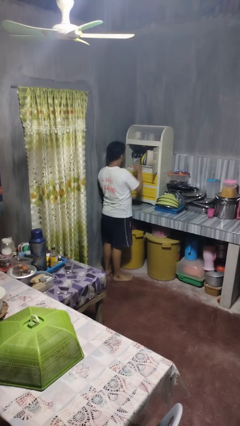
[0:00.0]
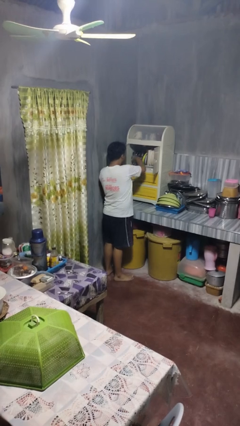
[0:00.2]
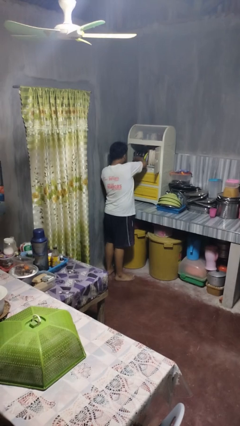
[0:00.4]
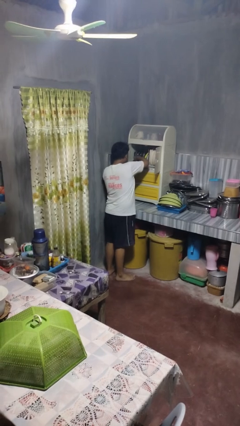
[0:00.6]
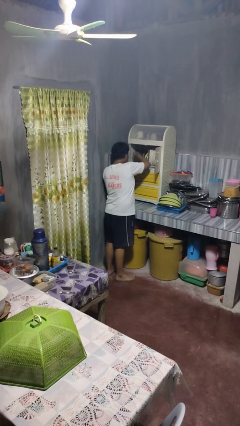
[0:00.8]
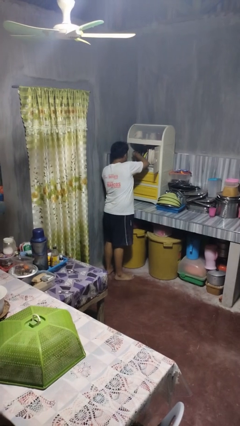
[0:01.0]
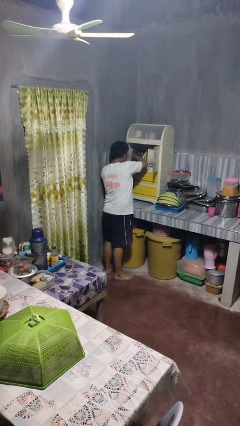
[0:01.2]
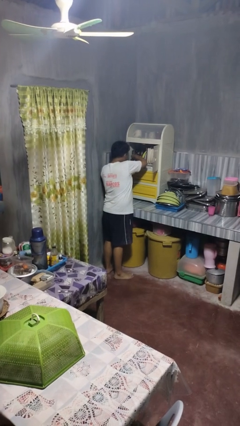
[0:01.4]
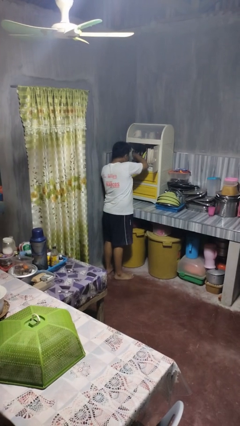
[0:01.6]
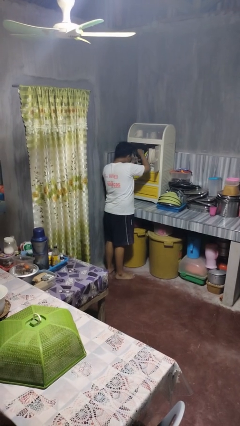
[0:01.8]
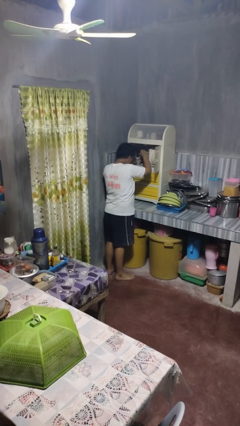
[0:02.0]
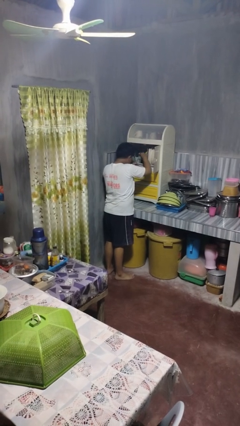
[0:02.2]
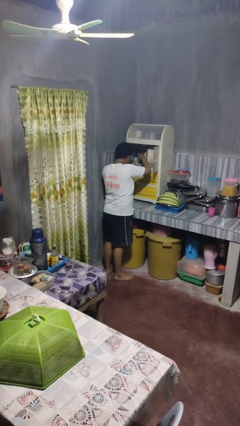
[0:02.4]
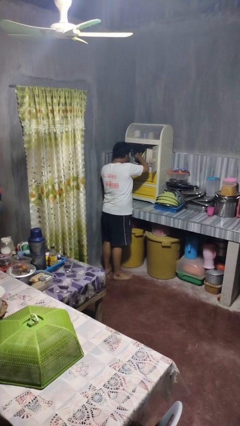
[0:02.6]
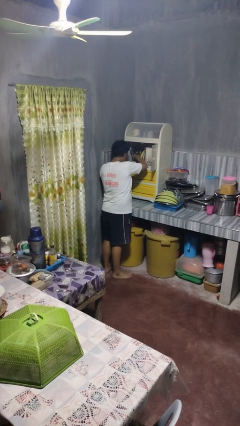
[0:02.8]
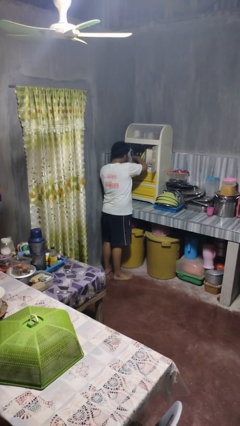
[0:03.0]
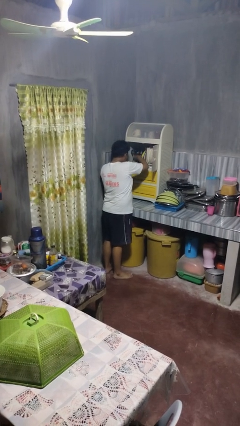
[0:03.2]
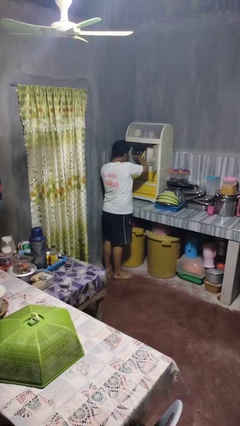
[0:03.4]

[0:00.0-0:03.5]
person searches in cabinet

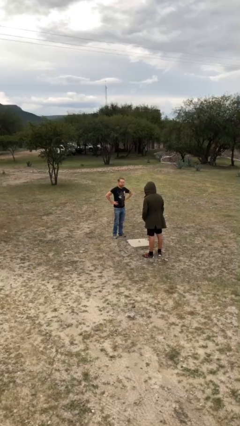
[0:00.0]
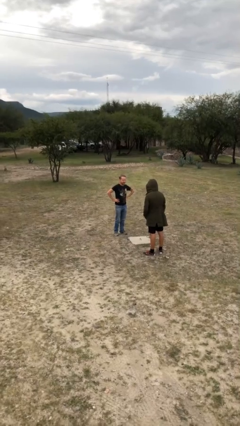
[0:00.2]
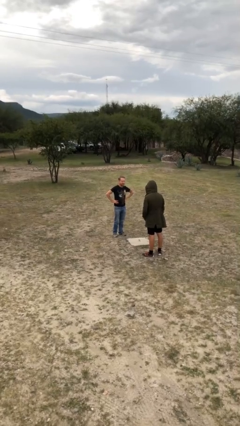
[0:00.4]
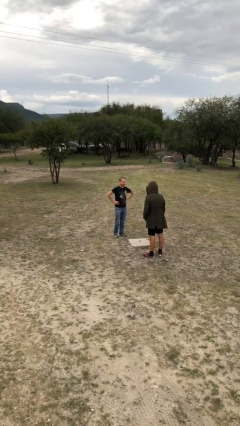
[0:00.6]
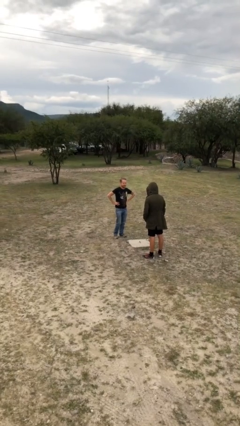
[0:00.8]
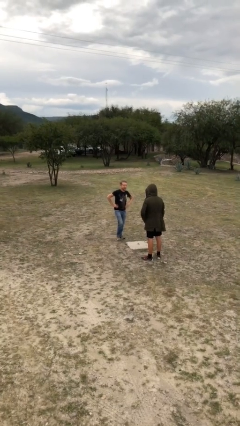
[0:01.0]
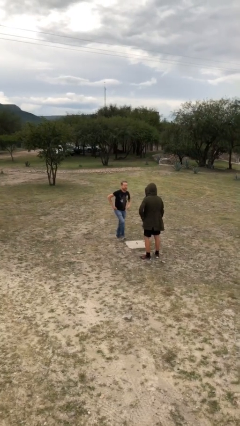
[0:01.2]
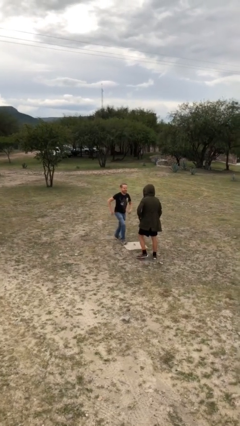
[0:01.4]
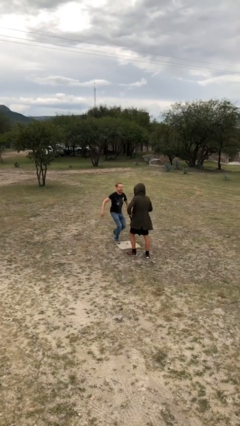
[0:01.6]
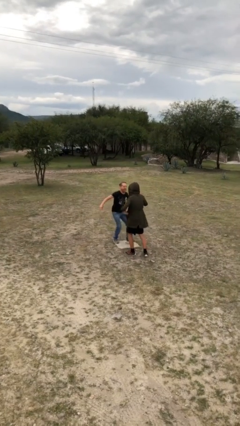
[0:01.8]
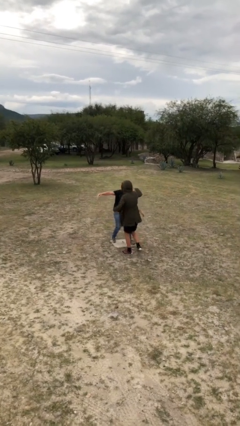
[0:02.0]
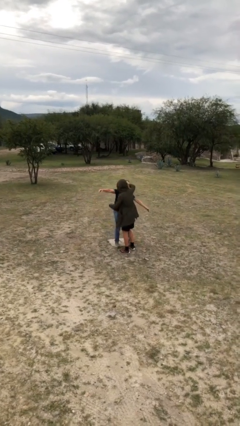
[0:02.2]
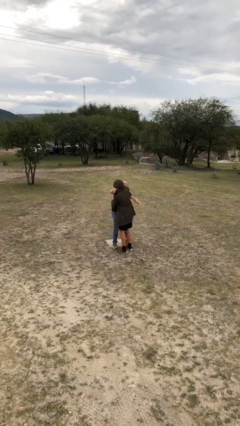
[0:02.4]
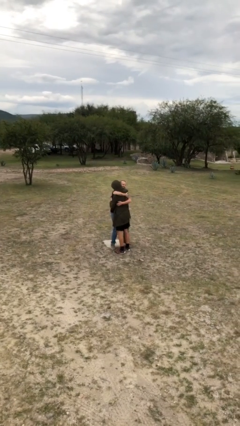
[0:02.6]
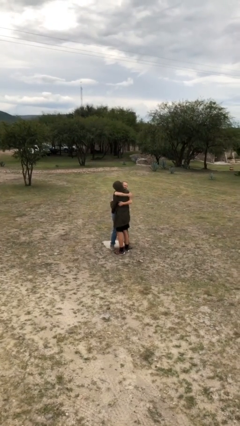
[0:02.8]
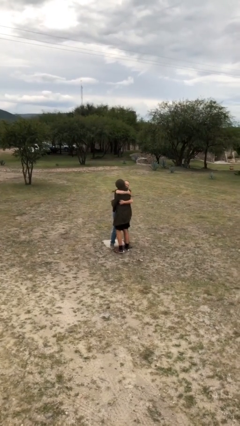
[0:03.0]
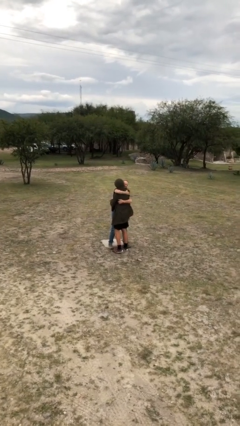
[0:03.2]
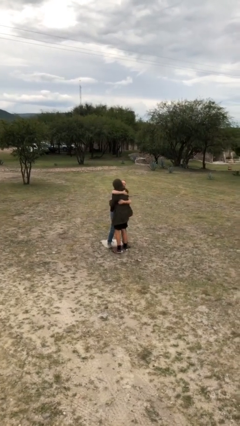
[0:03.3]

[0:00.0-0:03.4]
person embraces person

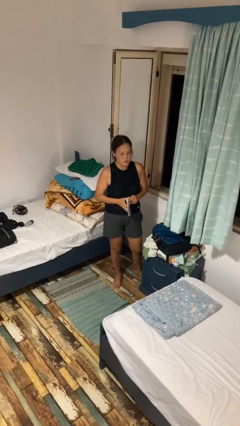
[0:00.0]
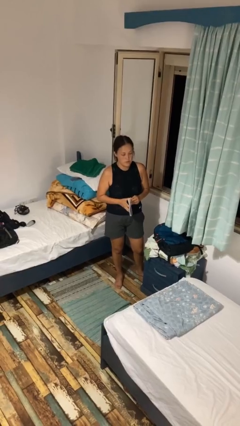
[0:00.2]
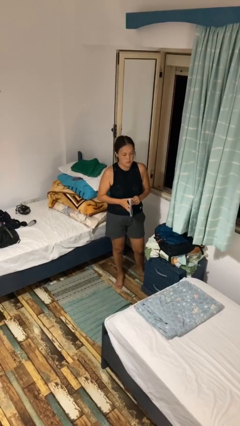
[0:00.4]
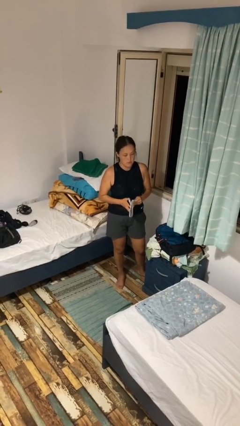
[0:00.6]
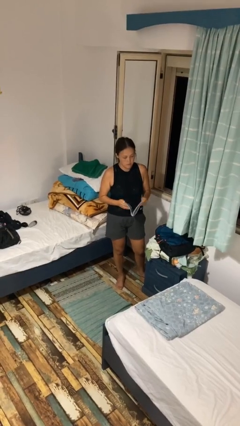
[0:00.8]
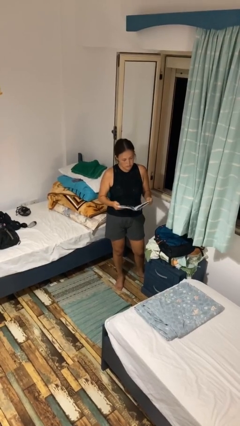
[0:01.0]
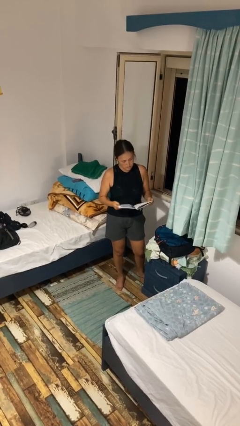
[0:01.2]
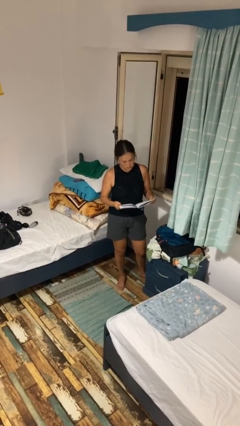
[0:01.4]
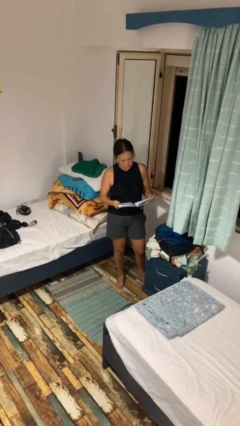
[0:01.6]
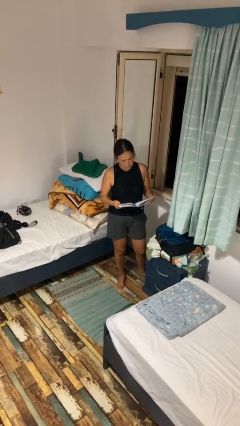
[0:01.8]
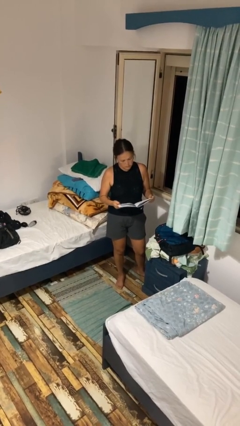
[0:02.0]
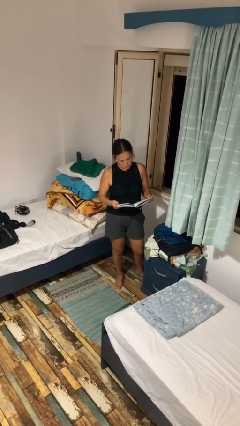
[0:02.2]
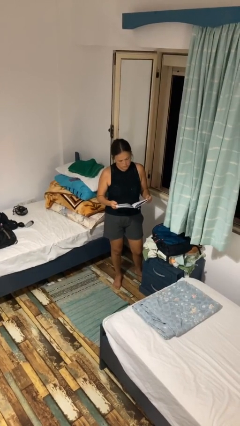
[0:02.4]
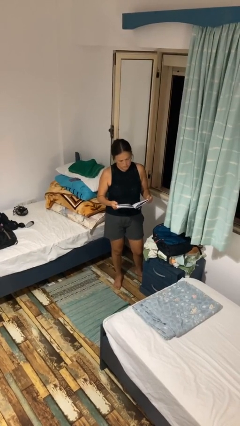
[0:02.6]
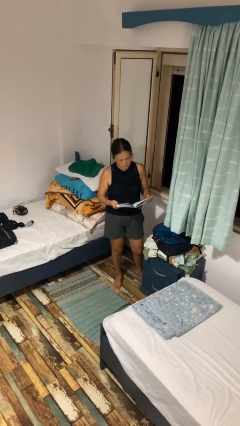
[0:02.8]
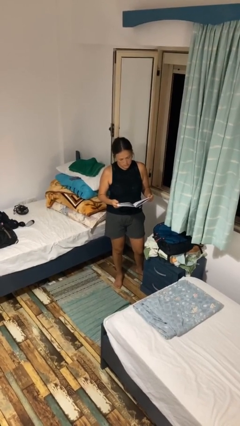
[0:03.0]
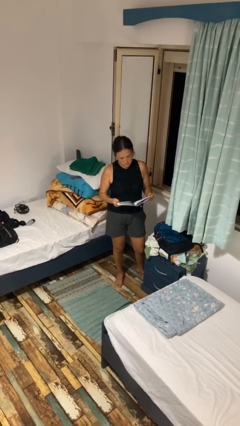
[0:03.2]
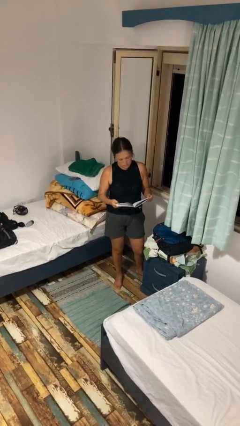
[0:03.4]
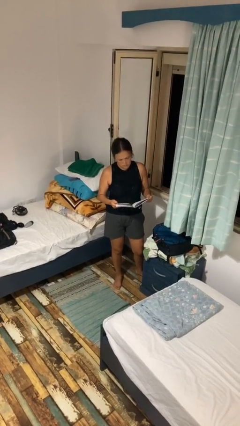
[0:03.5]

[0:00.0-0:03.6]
person reads book

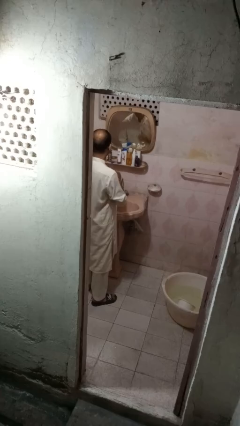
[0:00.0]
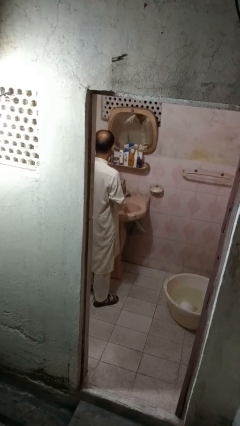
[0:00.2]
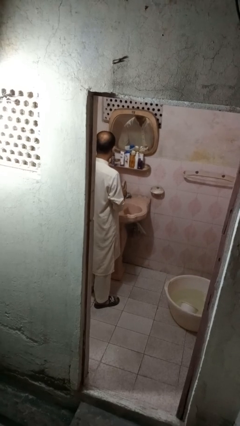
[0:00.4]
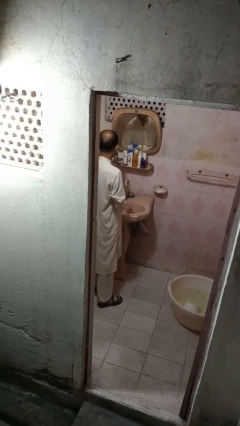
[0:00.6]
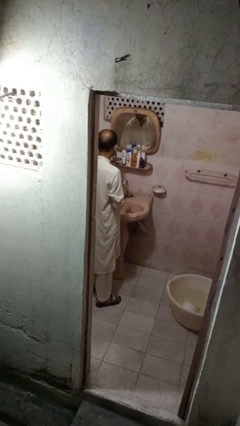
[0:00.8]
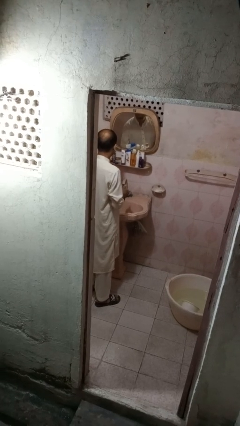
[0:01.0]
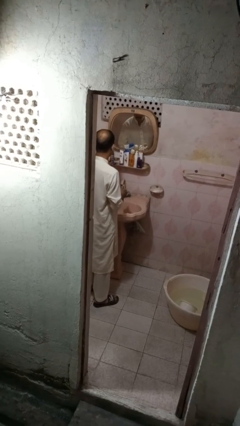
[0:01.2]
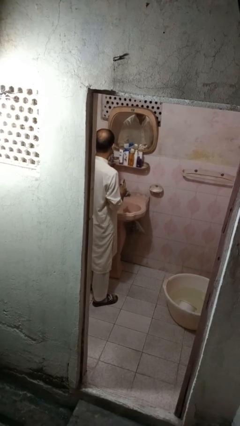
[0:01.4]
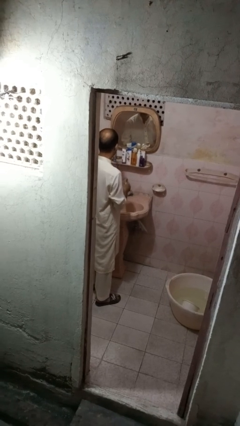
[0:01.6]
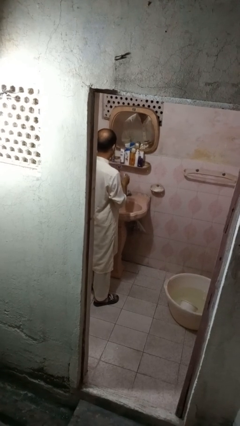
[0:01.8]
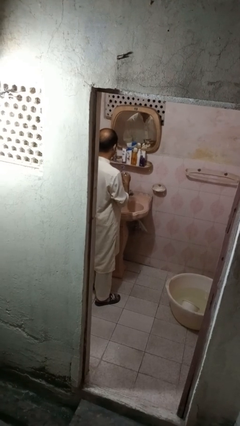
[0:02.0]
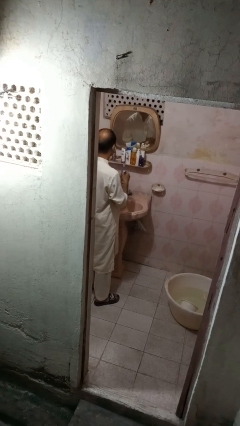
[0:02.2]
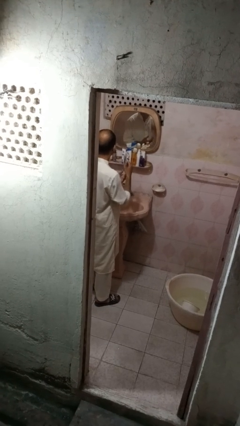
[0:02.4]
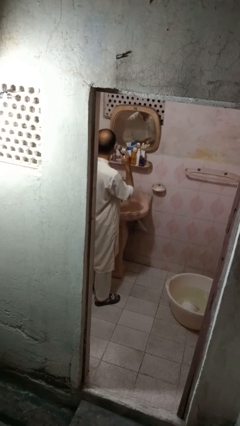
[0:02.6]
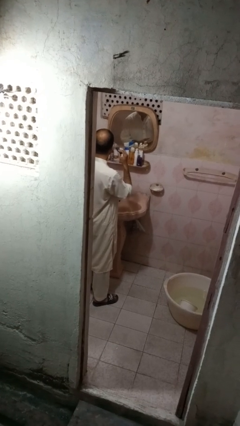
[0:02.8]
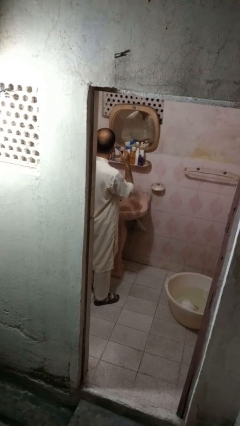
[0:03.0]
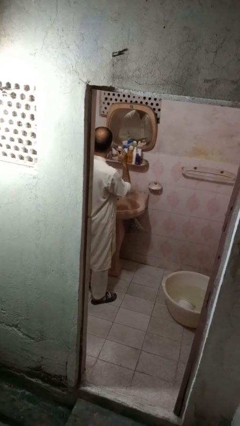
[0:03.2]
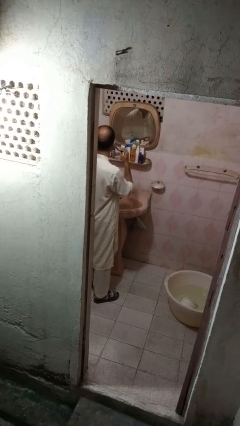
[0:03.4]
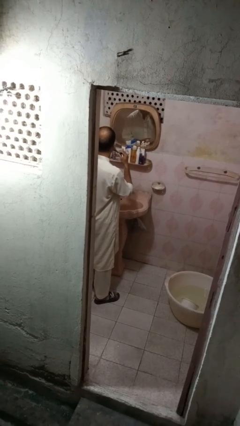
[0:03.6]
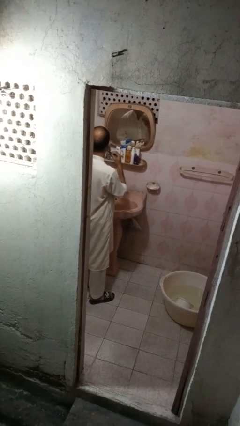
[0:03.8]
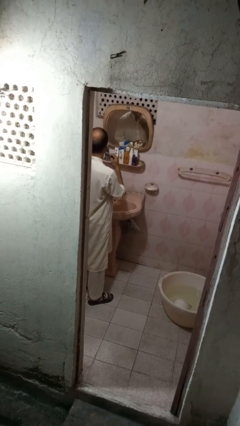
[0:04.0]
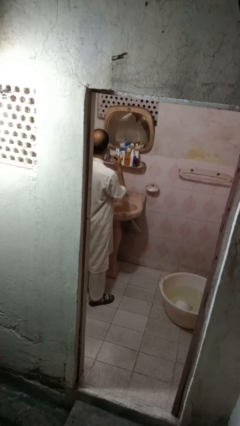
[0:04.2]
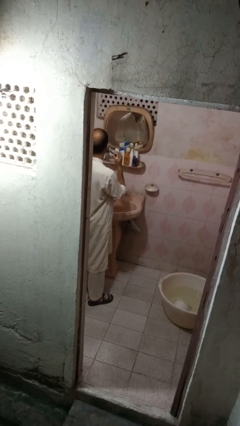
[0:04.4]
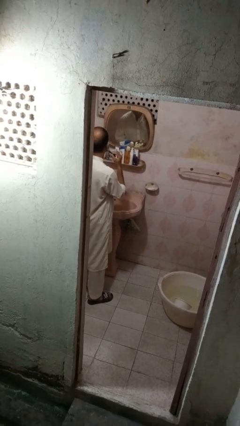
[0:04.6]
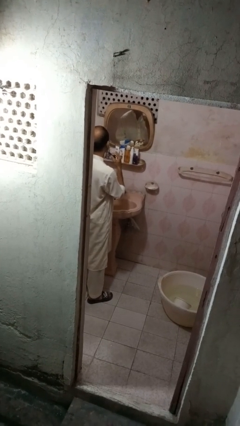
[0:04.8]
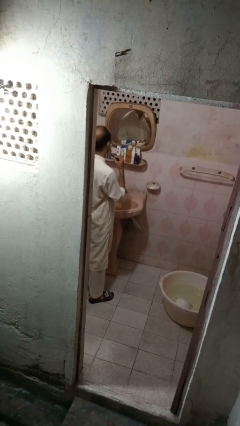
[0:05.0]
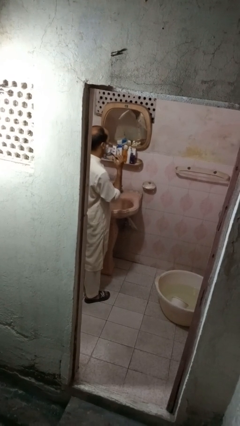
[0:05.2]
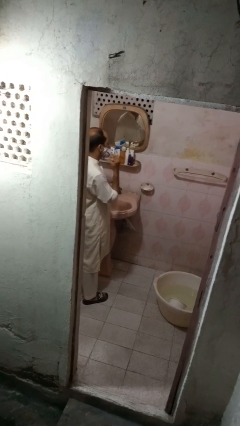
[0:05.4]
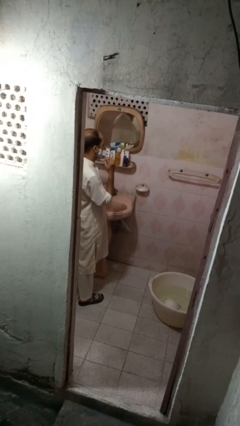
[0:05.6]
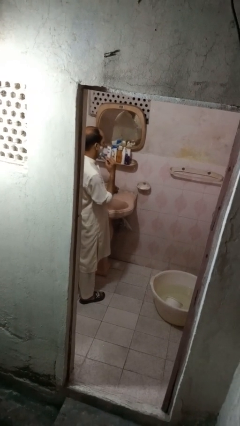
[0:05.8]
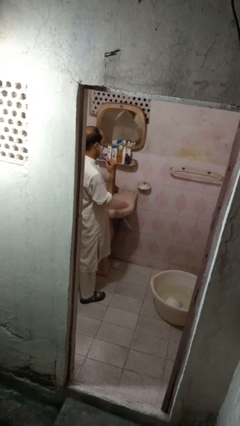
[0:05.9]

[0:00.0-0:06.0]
person shaves face

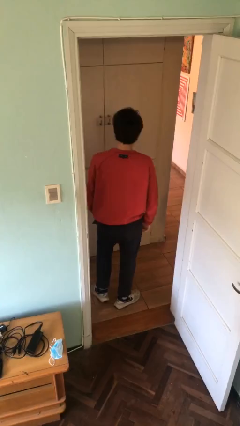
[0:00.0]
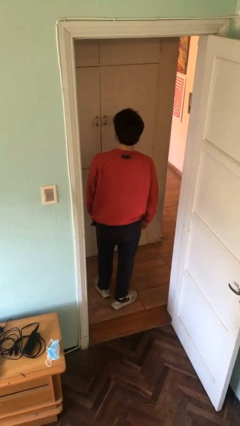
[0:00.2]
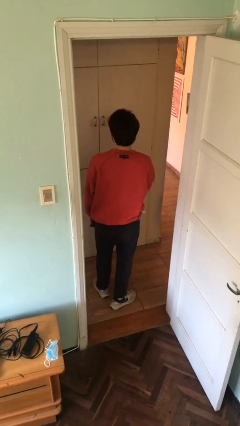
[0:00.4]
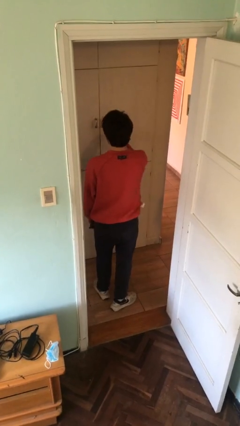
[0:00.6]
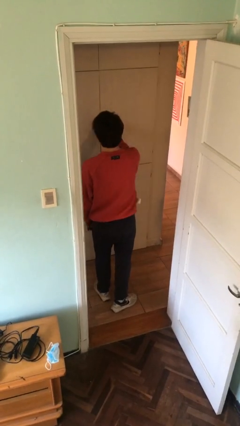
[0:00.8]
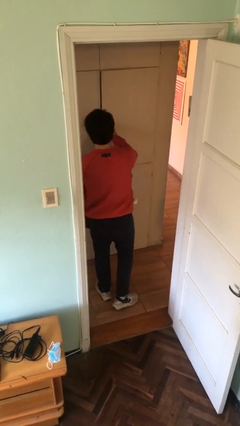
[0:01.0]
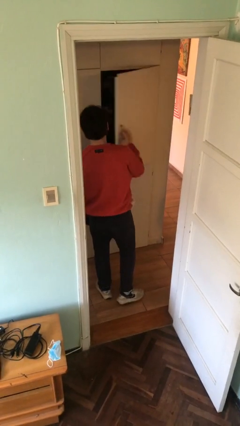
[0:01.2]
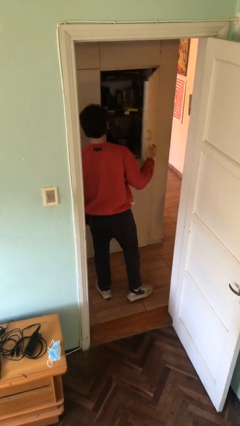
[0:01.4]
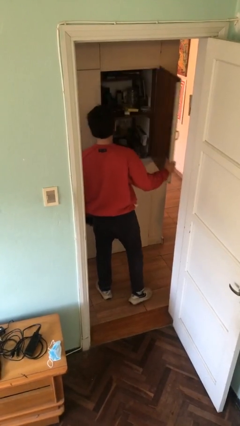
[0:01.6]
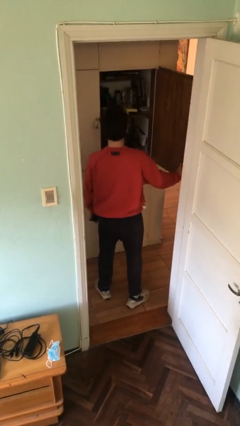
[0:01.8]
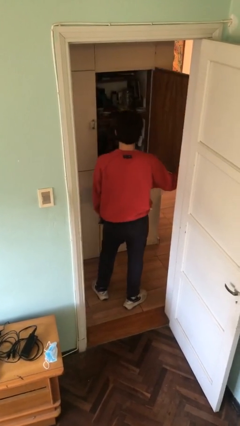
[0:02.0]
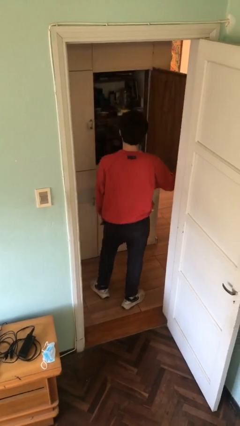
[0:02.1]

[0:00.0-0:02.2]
person opens closet door
